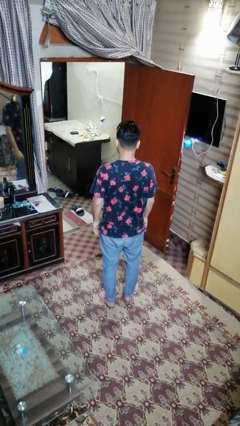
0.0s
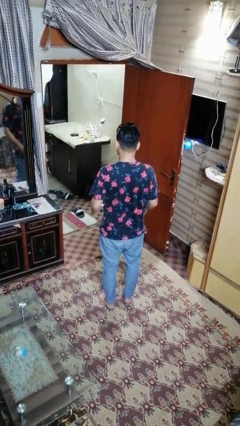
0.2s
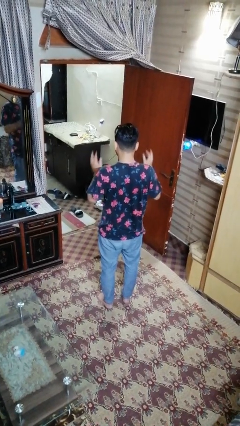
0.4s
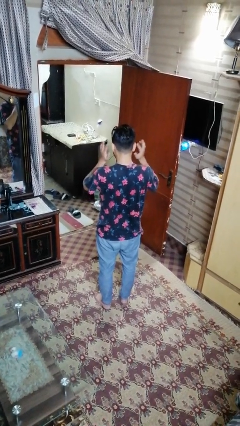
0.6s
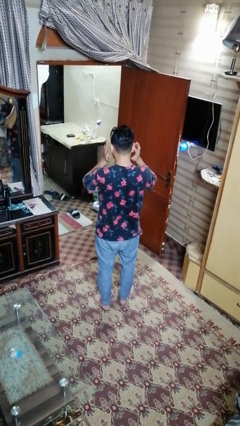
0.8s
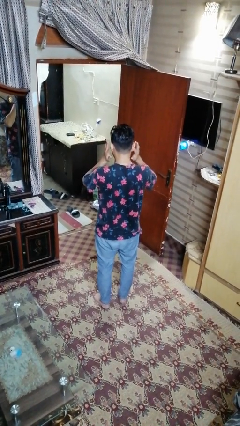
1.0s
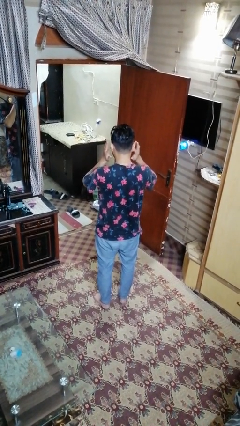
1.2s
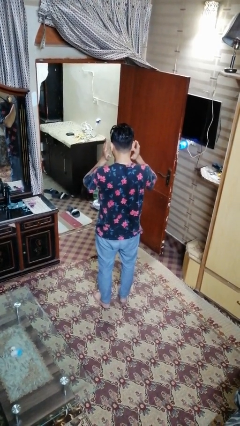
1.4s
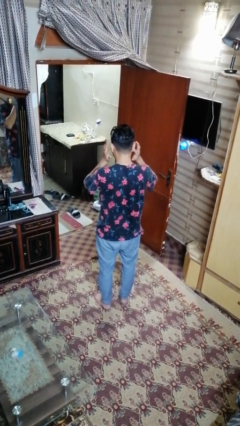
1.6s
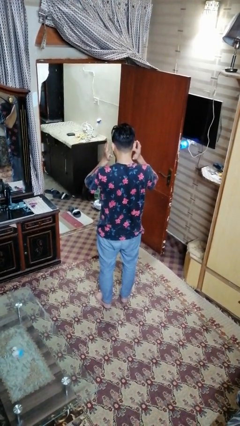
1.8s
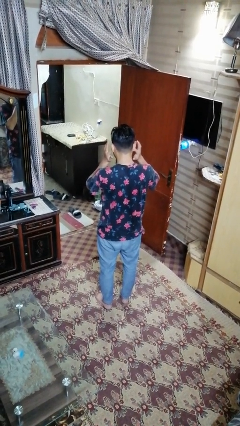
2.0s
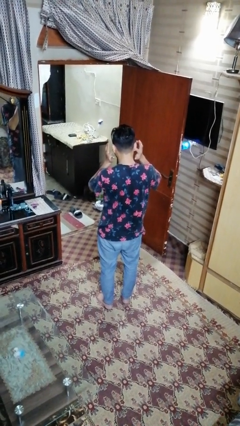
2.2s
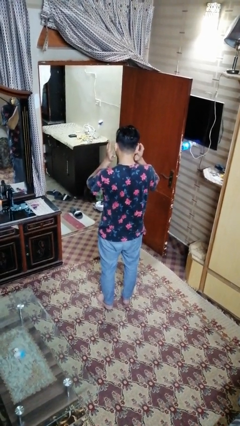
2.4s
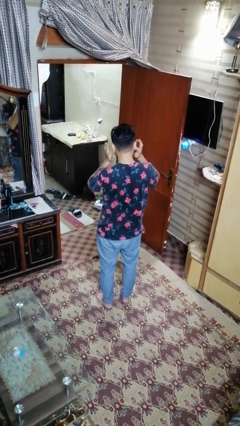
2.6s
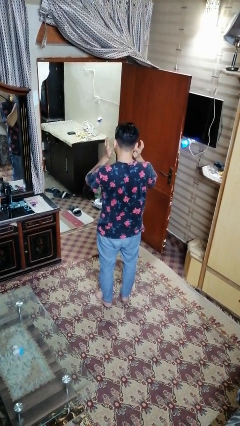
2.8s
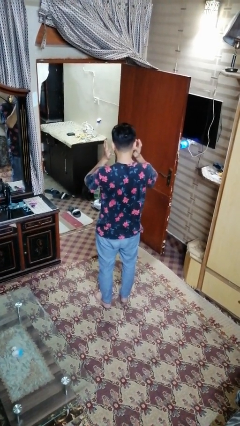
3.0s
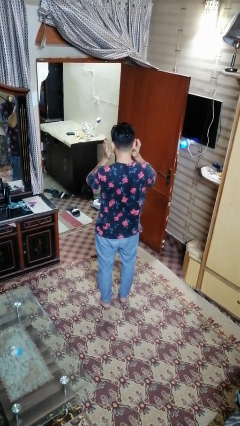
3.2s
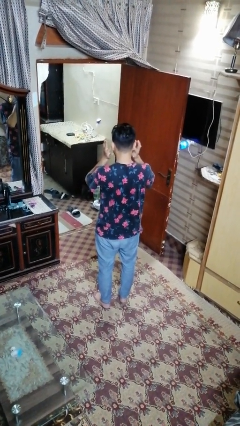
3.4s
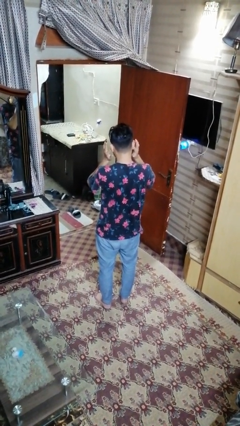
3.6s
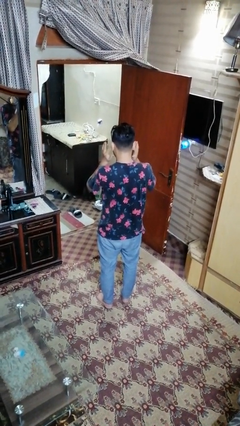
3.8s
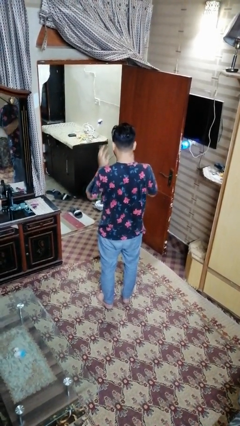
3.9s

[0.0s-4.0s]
person puts fingers in ear

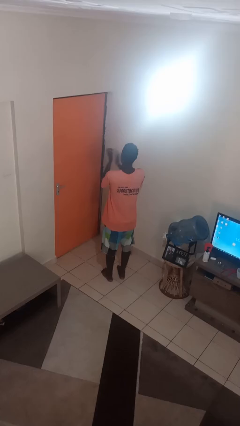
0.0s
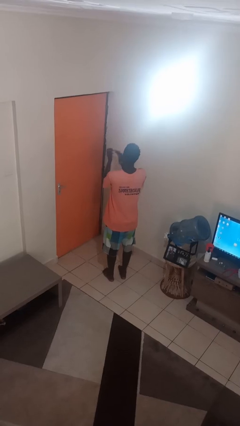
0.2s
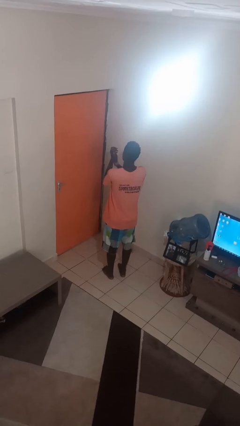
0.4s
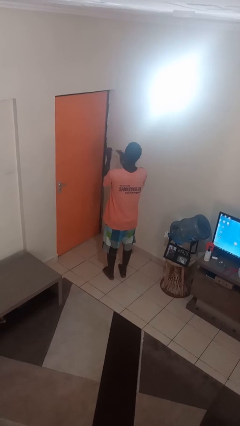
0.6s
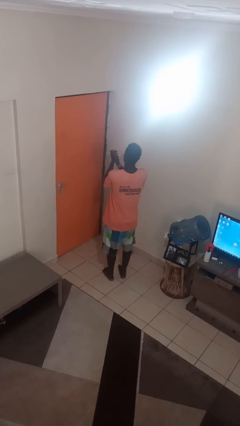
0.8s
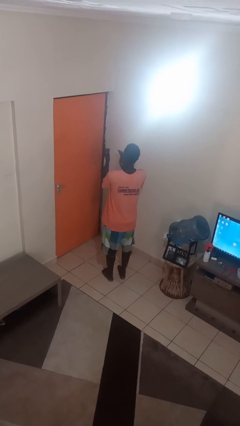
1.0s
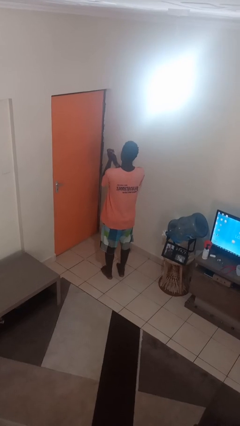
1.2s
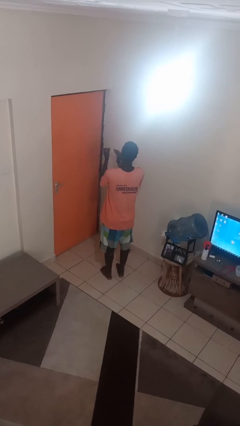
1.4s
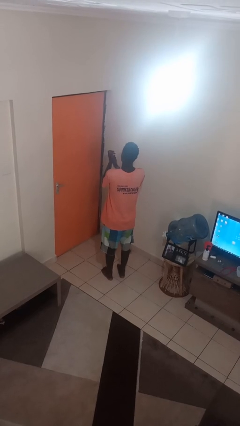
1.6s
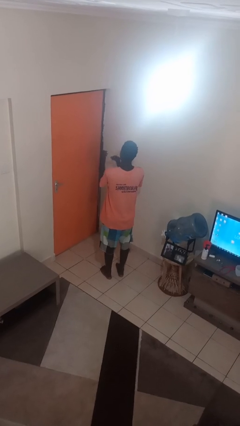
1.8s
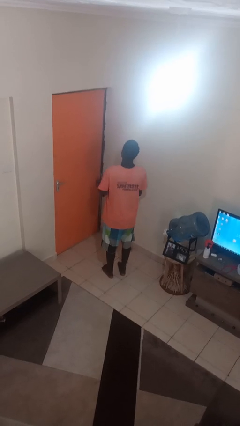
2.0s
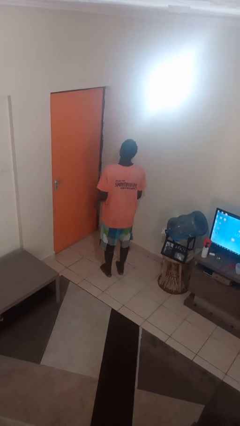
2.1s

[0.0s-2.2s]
person claps hands

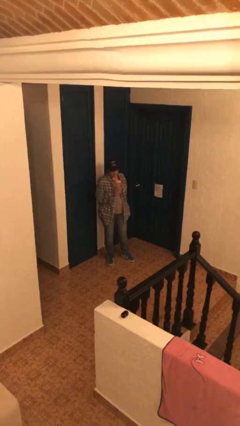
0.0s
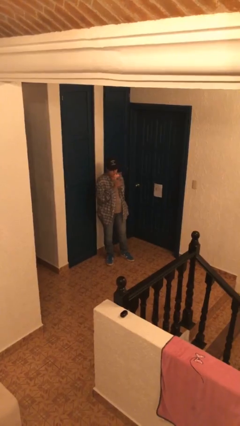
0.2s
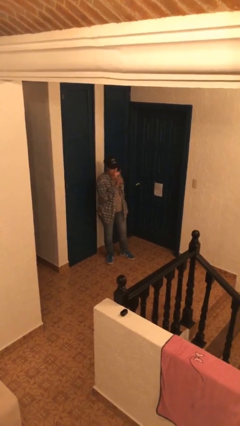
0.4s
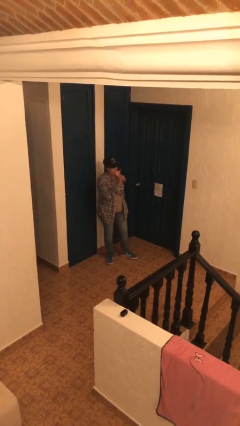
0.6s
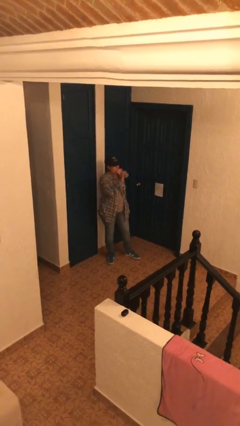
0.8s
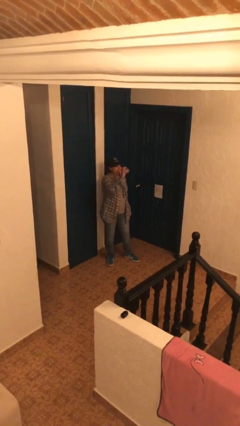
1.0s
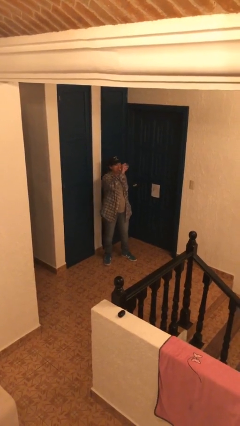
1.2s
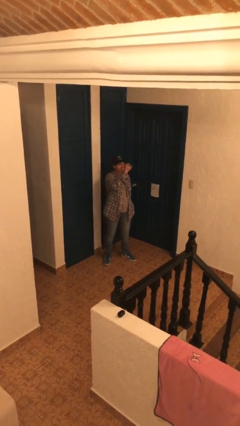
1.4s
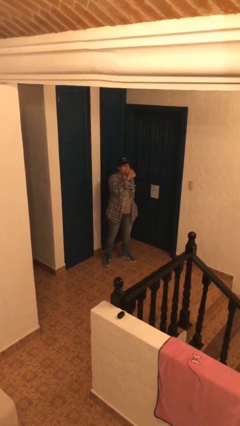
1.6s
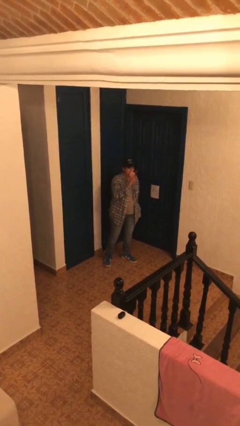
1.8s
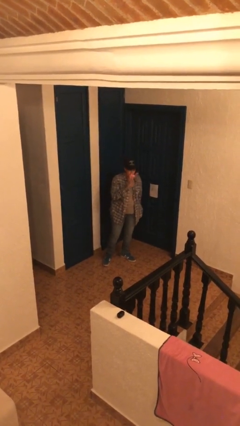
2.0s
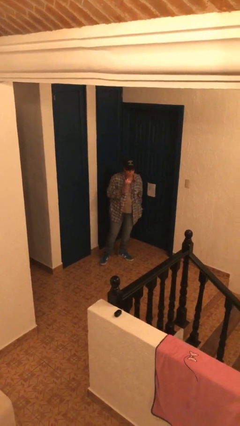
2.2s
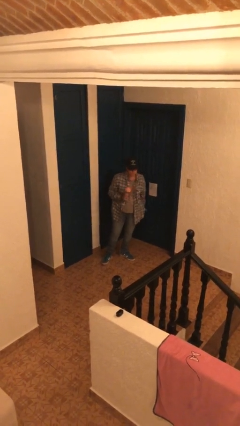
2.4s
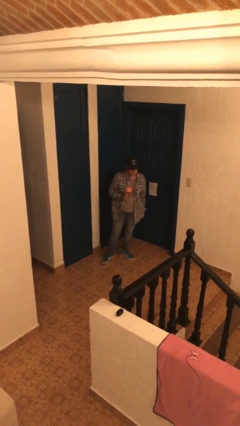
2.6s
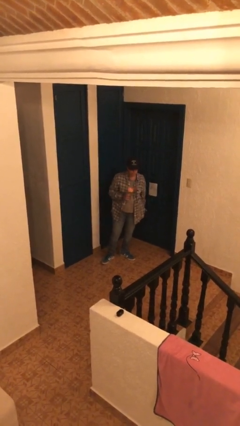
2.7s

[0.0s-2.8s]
person drinks from bottle

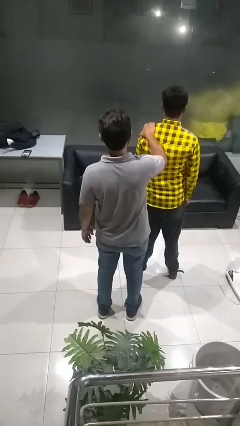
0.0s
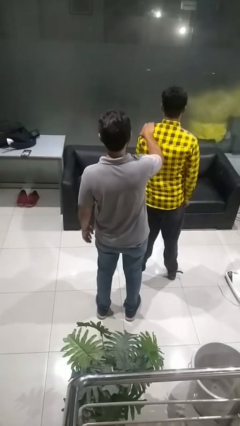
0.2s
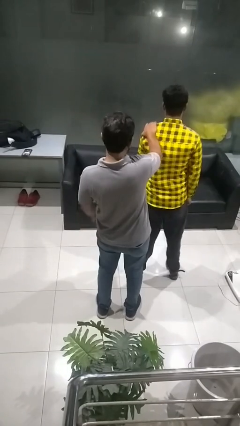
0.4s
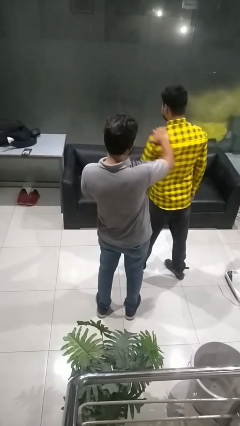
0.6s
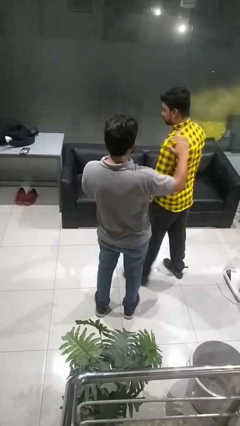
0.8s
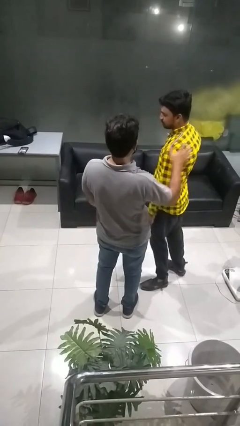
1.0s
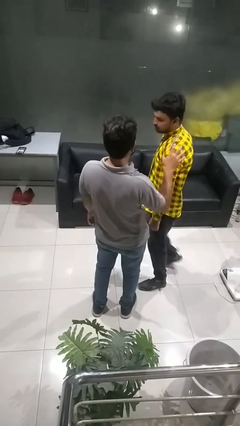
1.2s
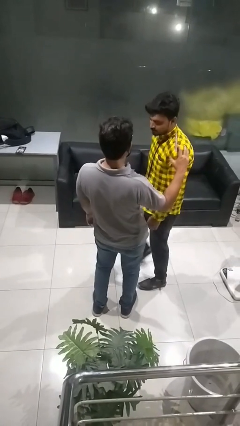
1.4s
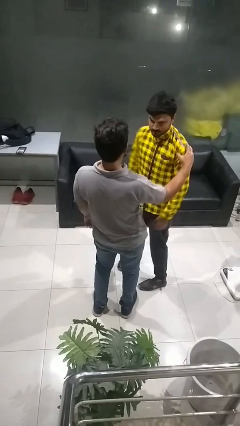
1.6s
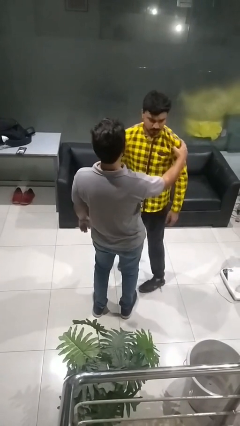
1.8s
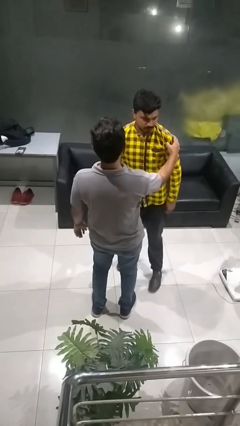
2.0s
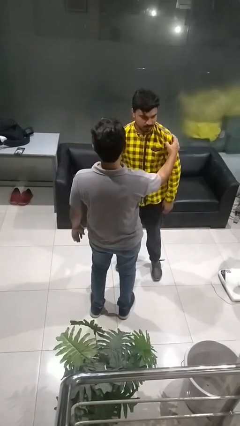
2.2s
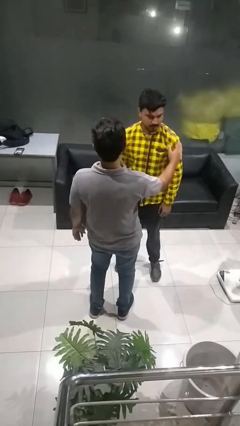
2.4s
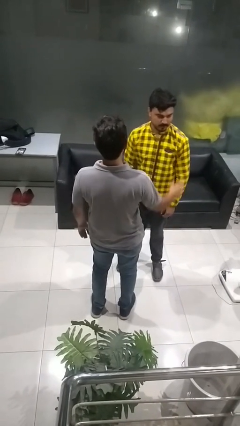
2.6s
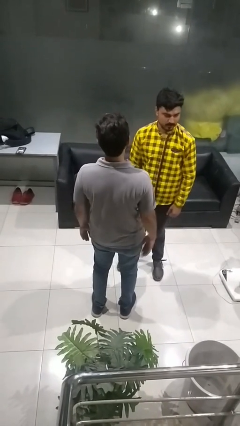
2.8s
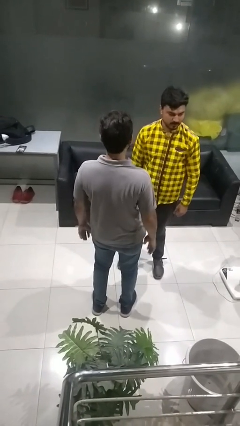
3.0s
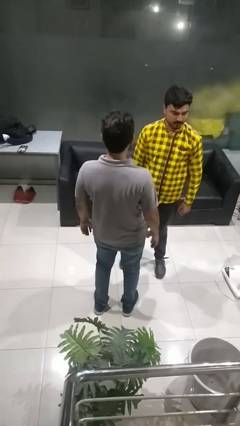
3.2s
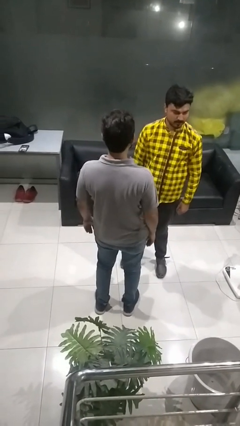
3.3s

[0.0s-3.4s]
person spins person around

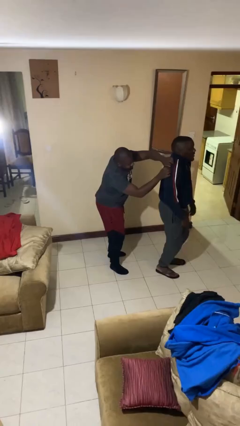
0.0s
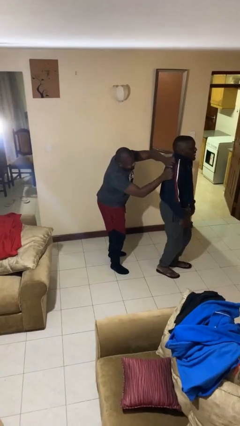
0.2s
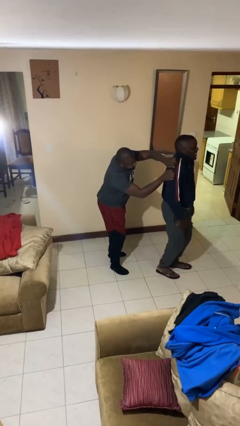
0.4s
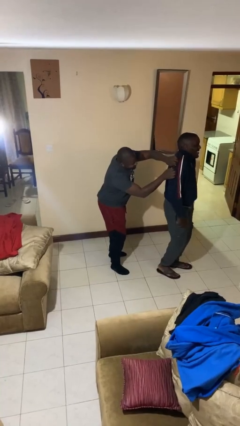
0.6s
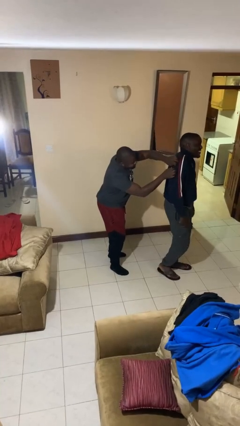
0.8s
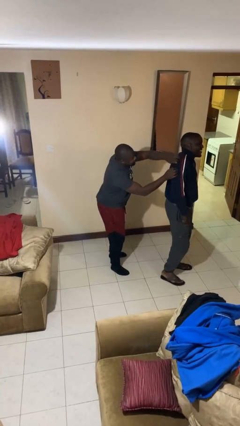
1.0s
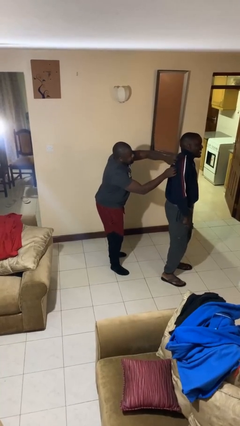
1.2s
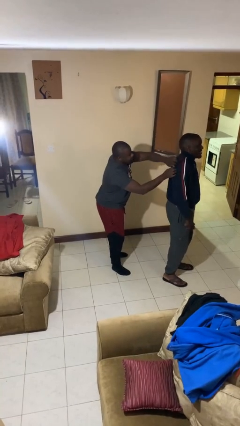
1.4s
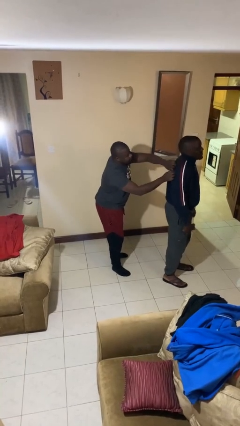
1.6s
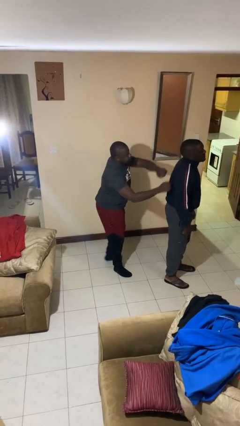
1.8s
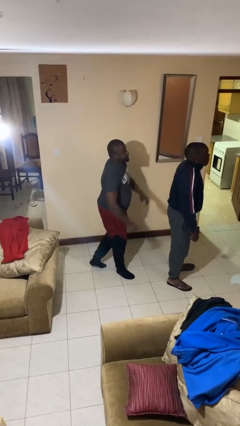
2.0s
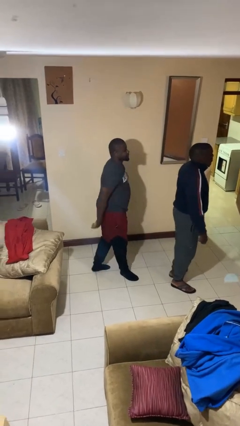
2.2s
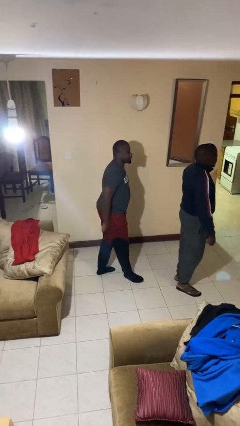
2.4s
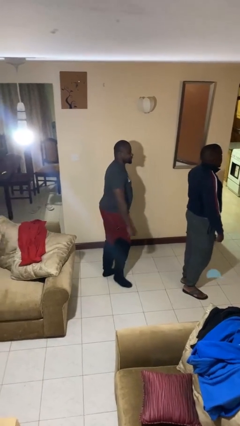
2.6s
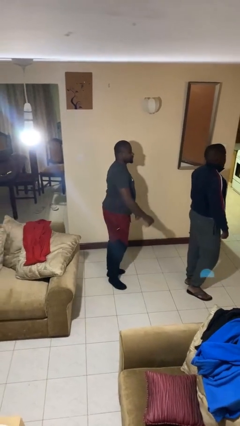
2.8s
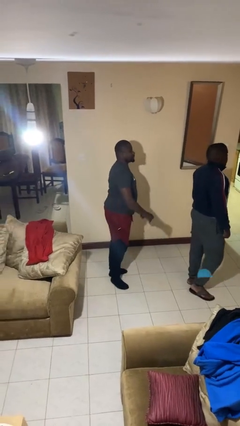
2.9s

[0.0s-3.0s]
person tickles person

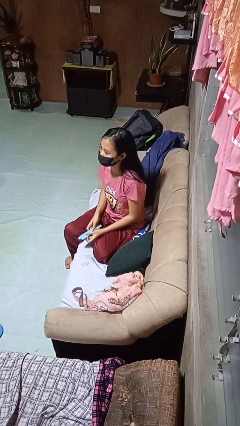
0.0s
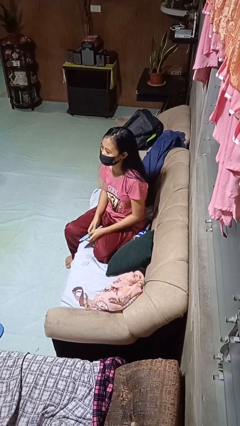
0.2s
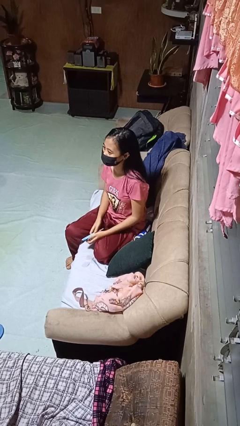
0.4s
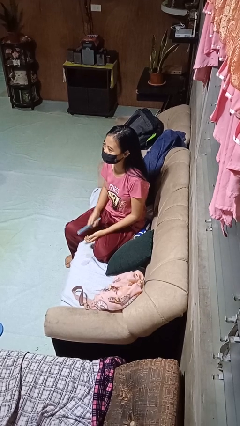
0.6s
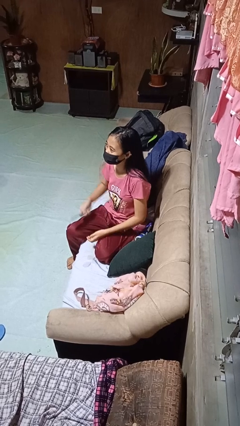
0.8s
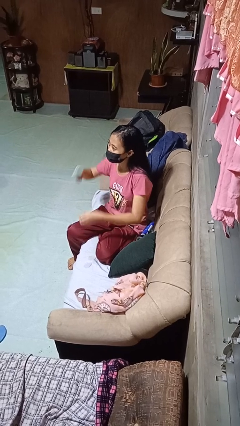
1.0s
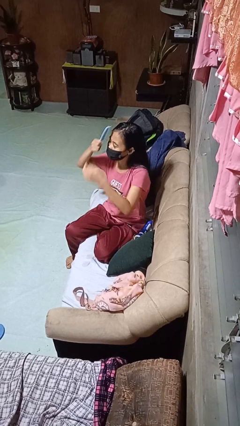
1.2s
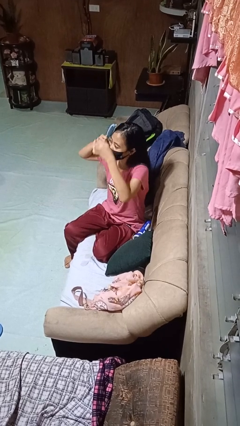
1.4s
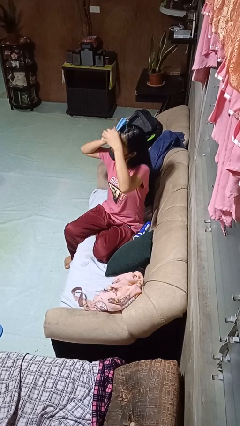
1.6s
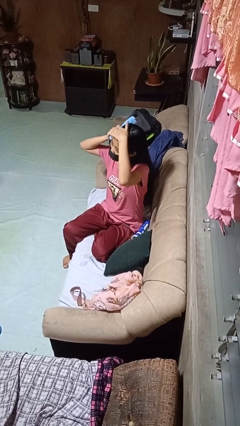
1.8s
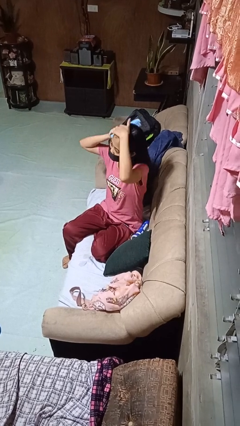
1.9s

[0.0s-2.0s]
person brushes hair

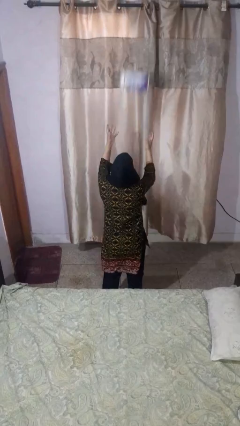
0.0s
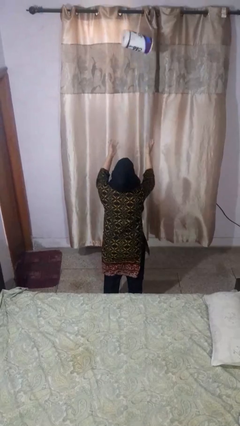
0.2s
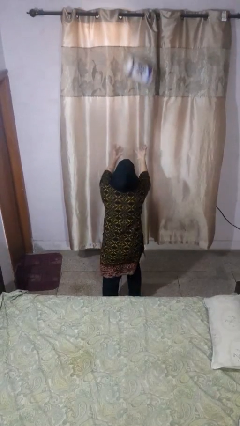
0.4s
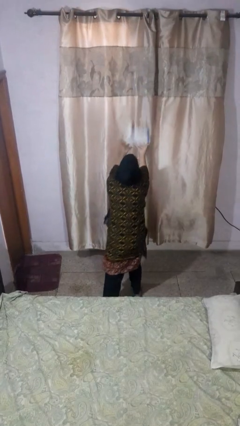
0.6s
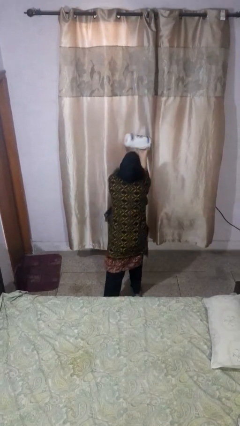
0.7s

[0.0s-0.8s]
person drops object
